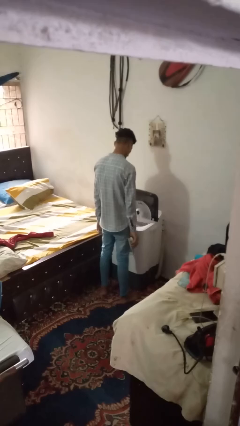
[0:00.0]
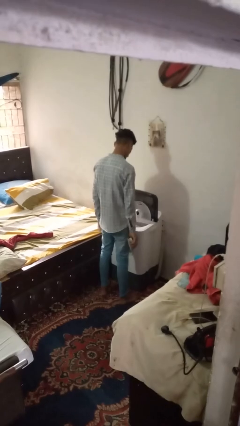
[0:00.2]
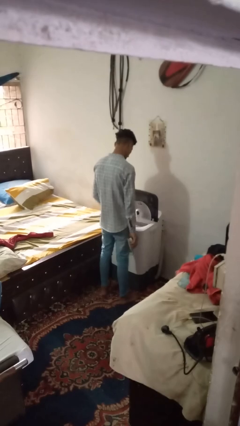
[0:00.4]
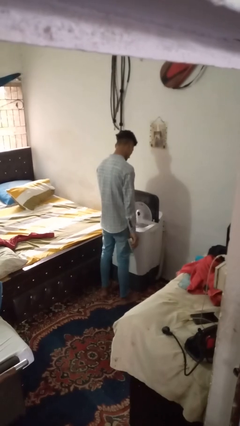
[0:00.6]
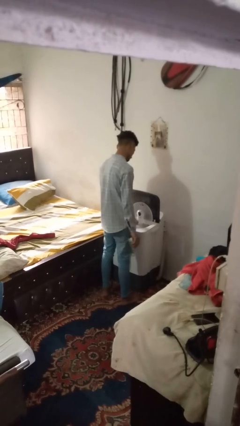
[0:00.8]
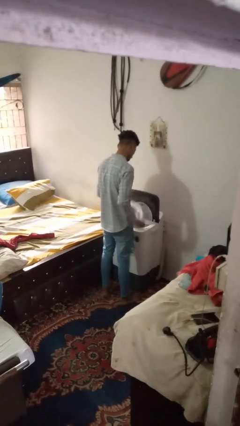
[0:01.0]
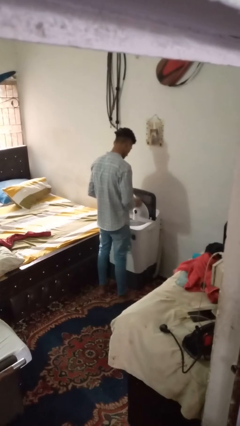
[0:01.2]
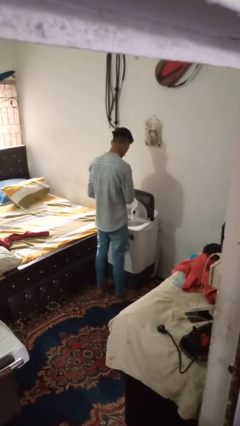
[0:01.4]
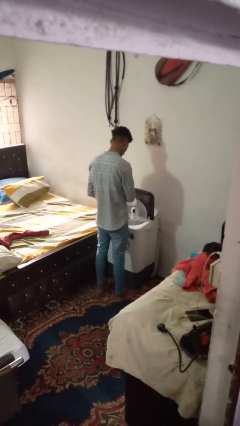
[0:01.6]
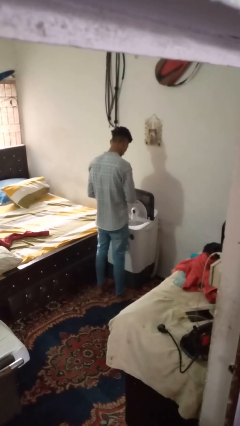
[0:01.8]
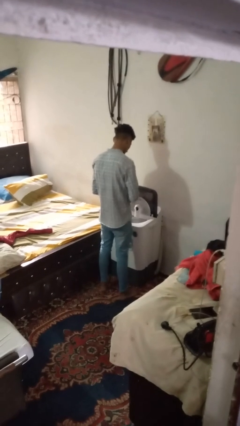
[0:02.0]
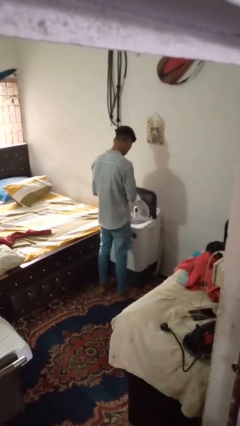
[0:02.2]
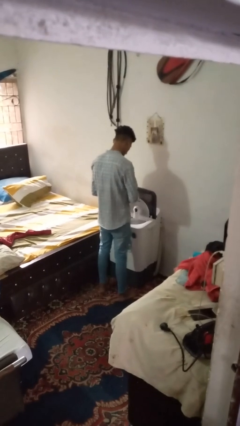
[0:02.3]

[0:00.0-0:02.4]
person cleans dryer lint trap

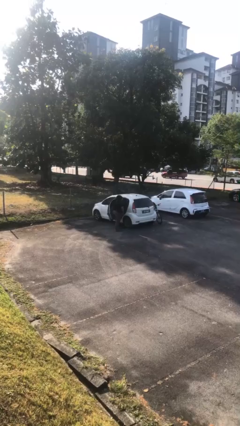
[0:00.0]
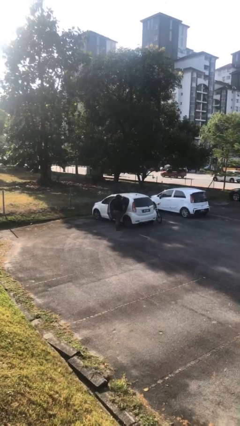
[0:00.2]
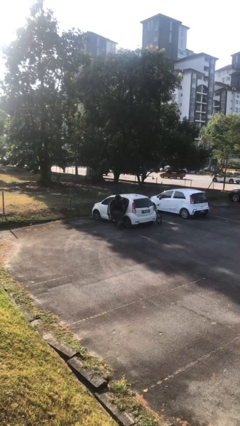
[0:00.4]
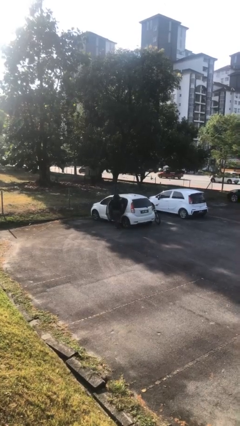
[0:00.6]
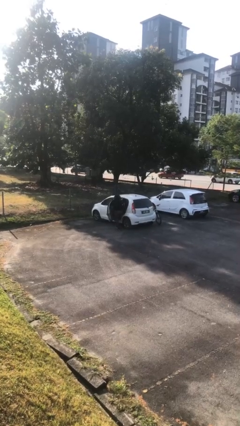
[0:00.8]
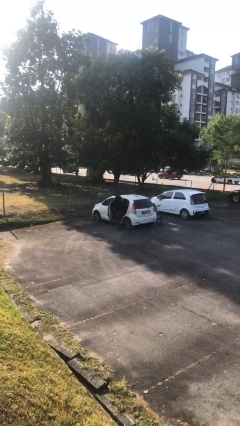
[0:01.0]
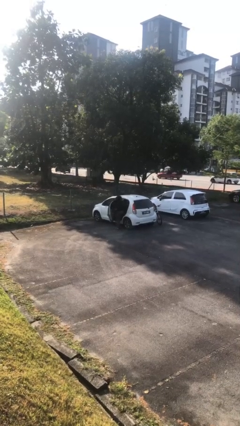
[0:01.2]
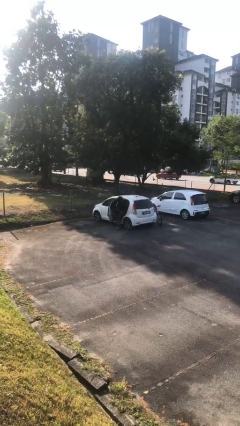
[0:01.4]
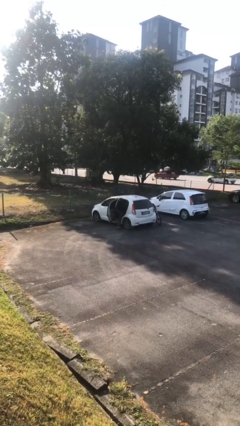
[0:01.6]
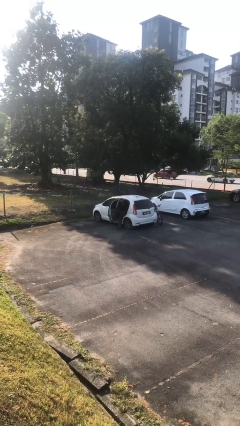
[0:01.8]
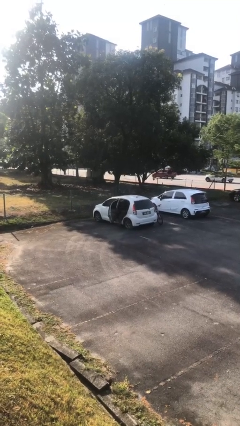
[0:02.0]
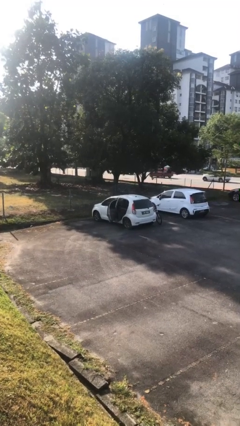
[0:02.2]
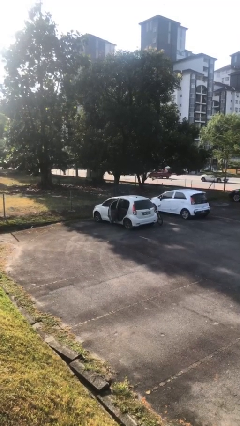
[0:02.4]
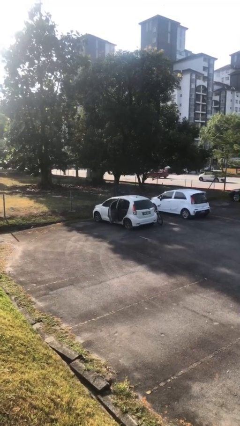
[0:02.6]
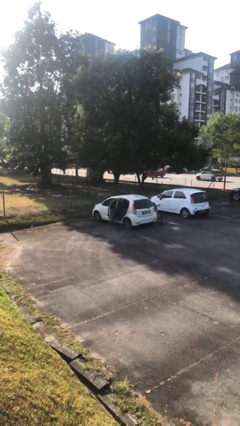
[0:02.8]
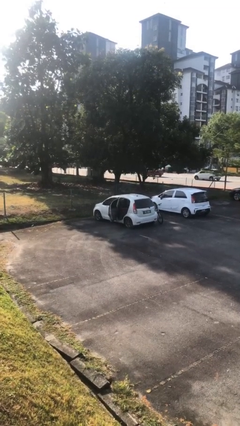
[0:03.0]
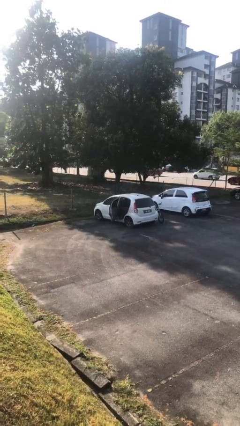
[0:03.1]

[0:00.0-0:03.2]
person enters car

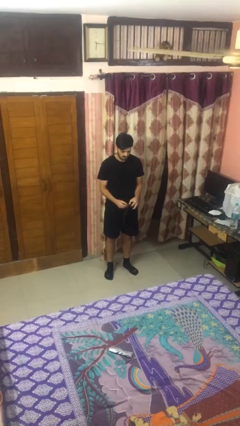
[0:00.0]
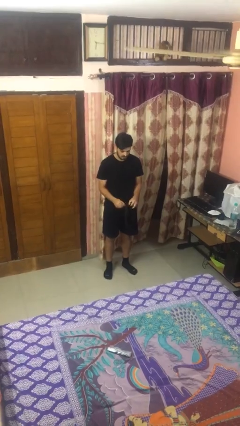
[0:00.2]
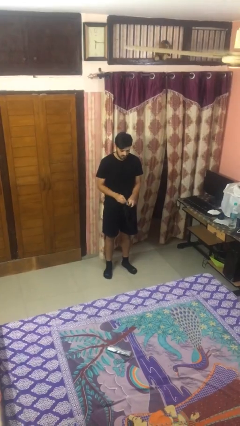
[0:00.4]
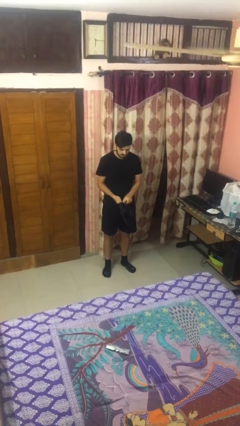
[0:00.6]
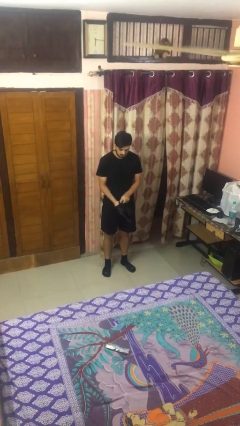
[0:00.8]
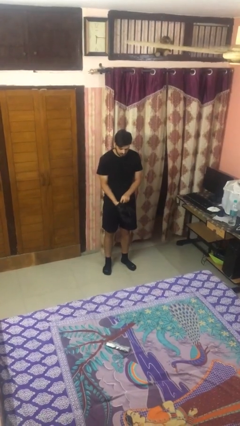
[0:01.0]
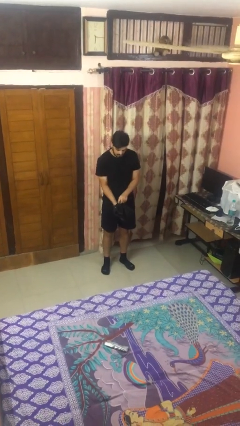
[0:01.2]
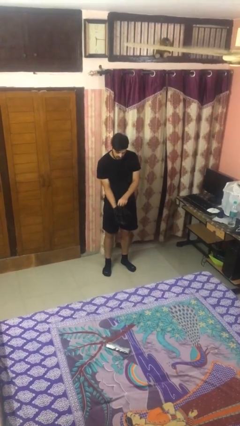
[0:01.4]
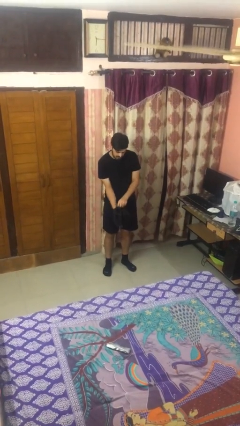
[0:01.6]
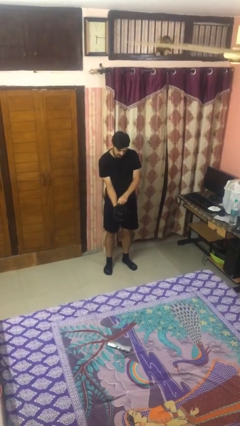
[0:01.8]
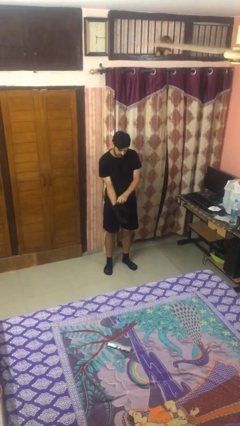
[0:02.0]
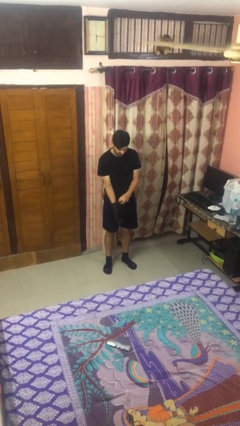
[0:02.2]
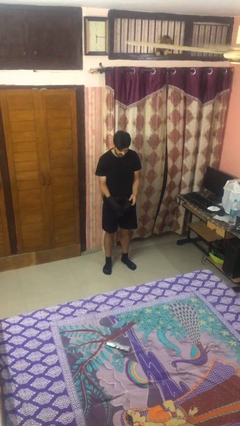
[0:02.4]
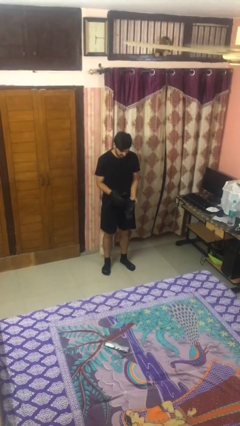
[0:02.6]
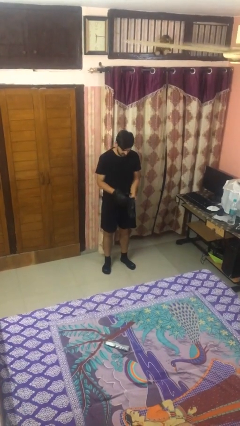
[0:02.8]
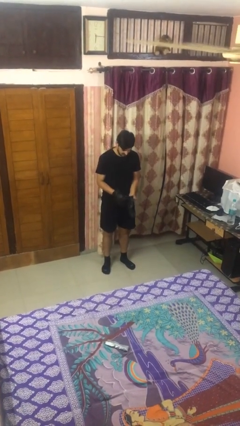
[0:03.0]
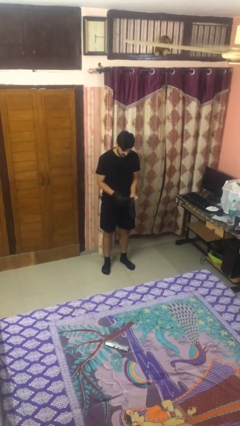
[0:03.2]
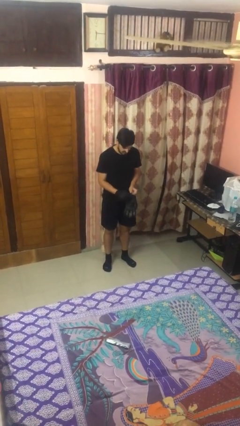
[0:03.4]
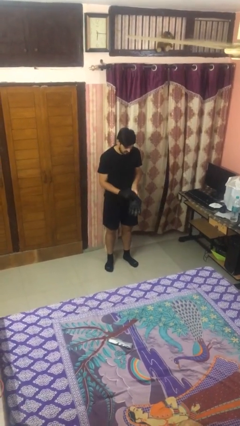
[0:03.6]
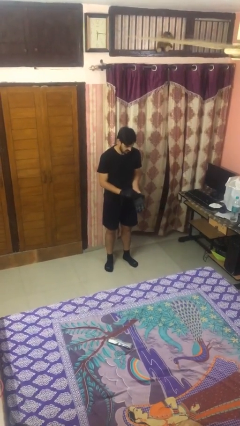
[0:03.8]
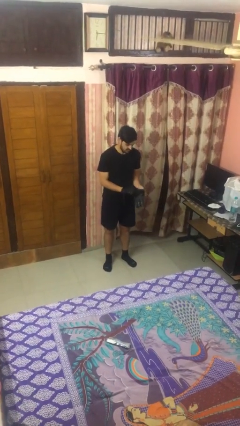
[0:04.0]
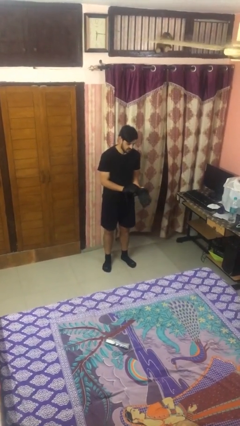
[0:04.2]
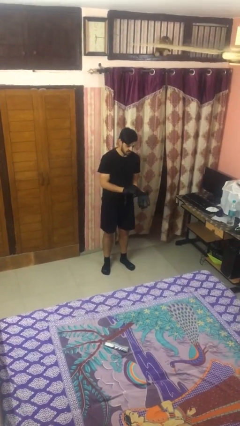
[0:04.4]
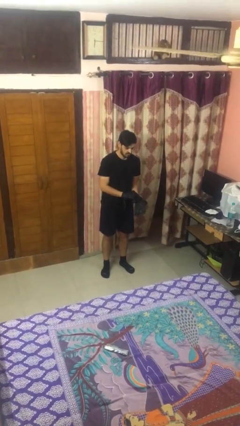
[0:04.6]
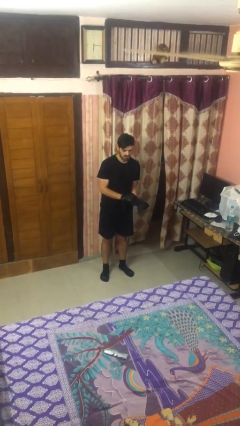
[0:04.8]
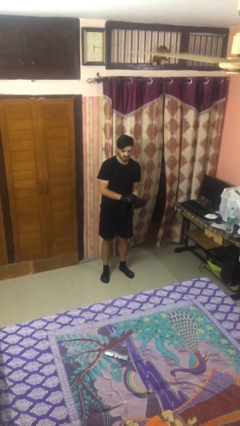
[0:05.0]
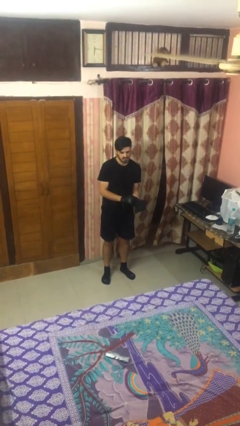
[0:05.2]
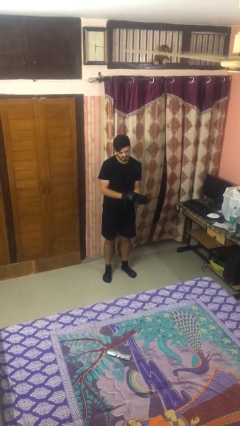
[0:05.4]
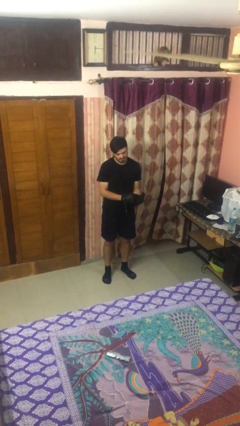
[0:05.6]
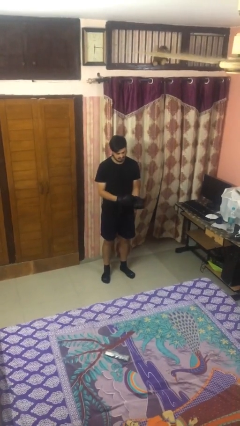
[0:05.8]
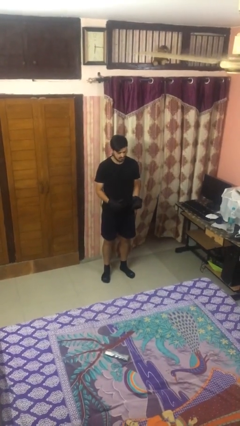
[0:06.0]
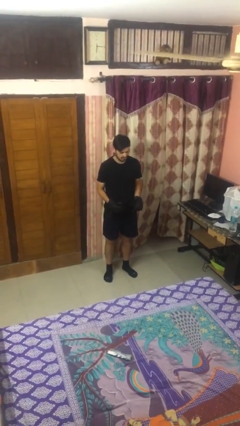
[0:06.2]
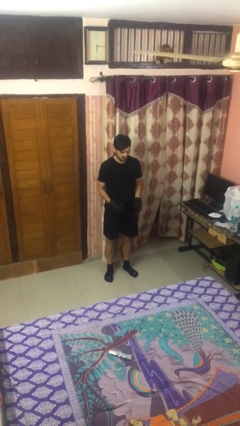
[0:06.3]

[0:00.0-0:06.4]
person puts on gloves

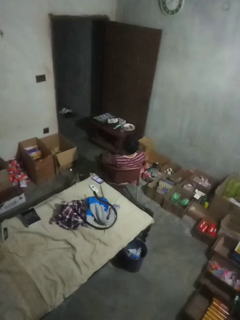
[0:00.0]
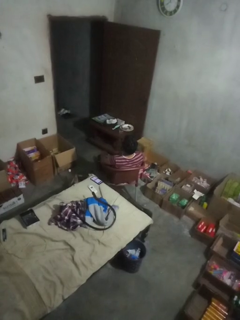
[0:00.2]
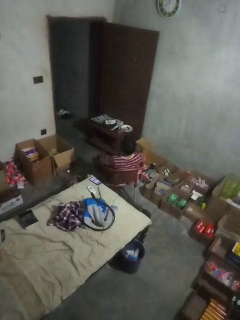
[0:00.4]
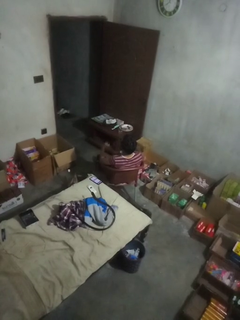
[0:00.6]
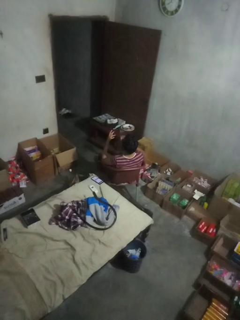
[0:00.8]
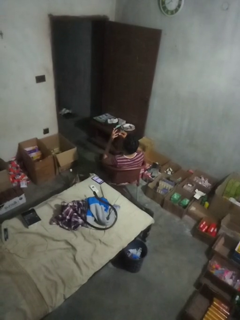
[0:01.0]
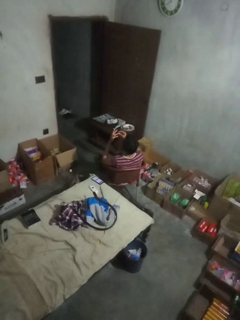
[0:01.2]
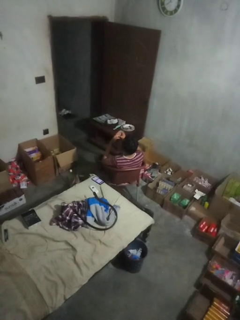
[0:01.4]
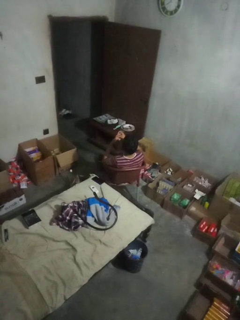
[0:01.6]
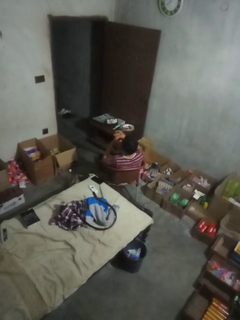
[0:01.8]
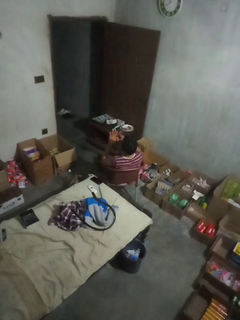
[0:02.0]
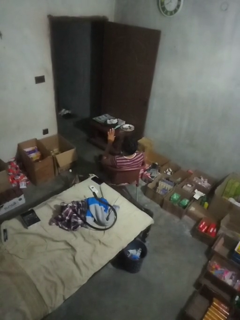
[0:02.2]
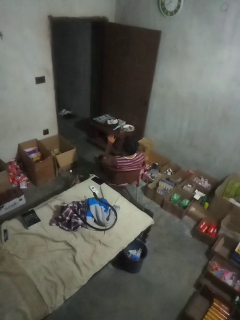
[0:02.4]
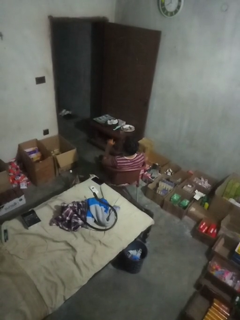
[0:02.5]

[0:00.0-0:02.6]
person puts on ring

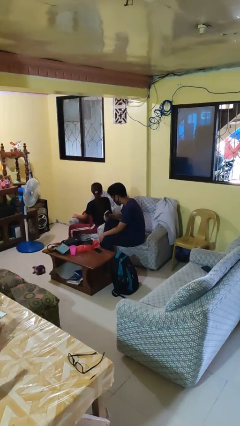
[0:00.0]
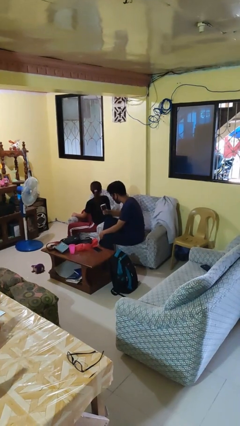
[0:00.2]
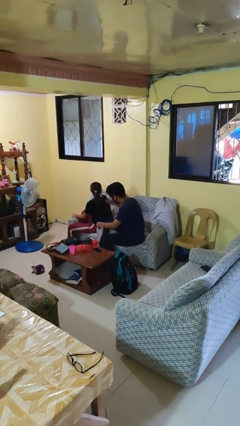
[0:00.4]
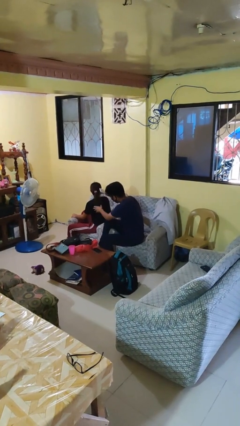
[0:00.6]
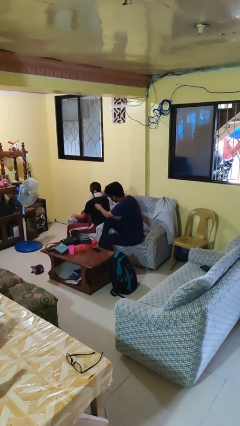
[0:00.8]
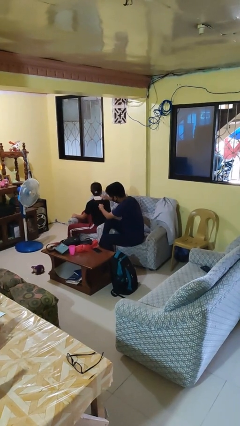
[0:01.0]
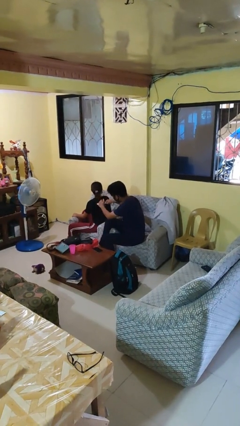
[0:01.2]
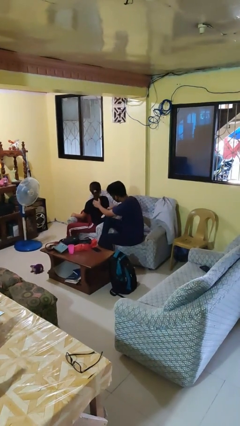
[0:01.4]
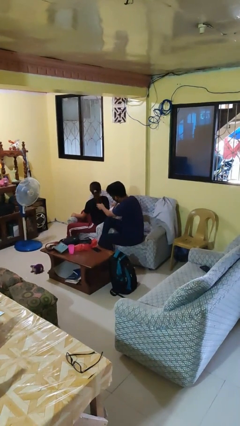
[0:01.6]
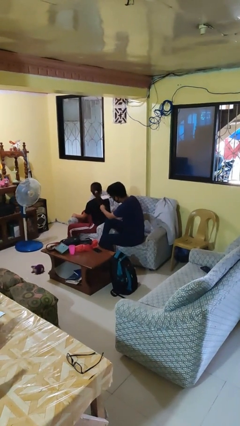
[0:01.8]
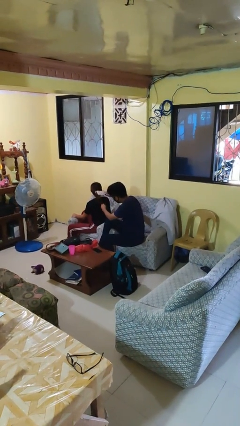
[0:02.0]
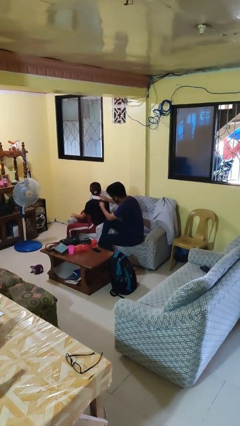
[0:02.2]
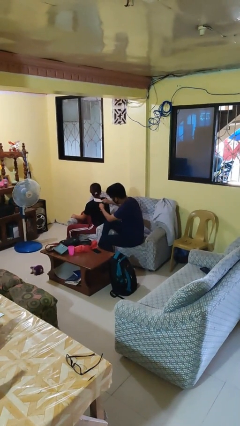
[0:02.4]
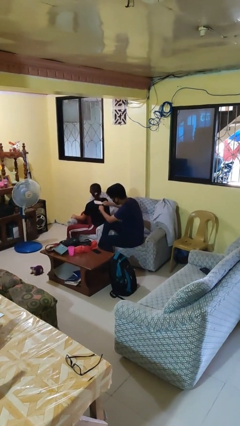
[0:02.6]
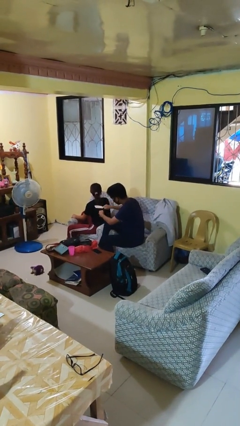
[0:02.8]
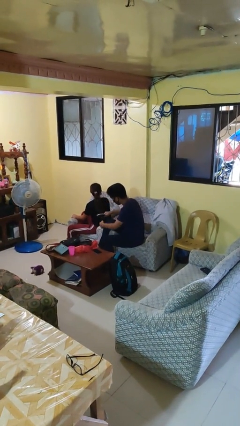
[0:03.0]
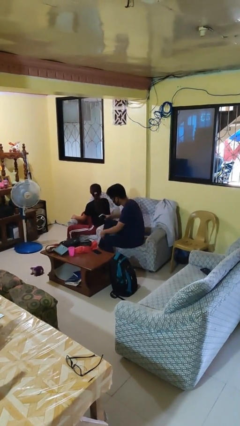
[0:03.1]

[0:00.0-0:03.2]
person brushes hair of person

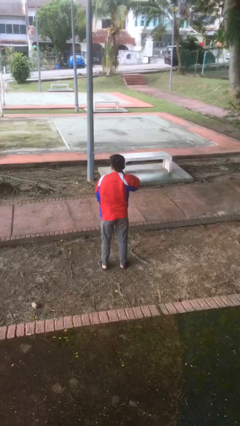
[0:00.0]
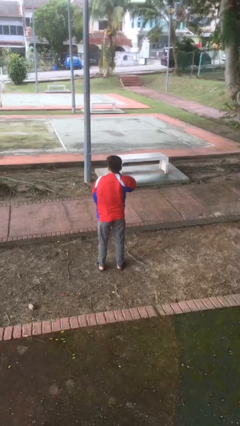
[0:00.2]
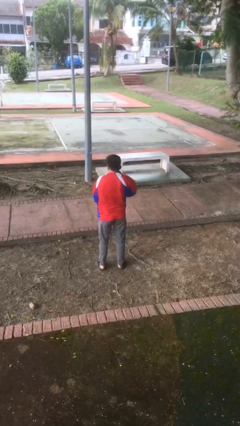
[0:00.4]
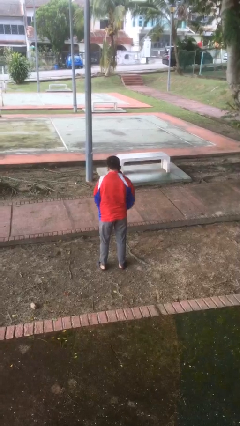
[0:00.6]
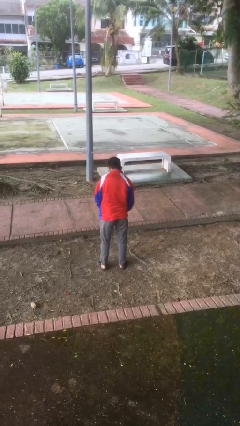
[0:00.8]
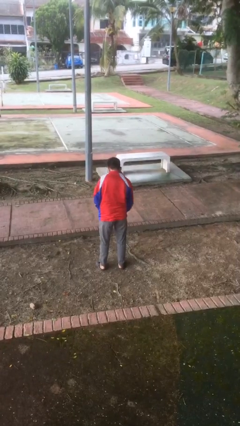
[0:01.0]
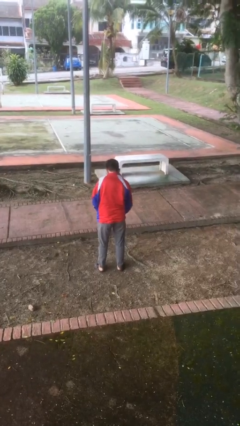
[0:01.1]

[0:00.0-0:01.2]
person unzips jacket
